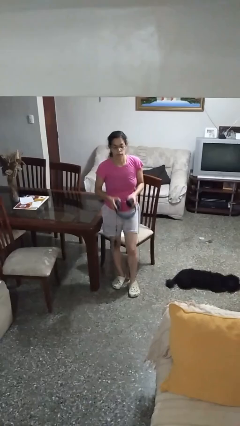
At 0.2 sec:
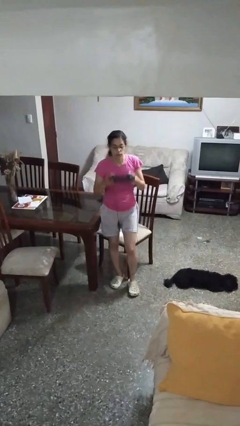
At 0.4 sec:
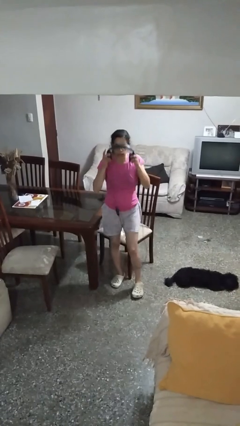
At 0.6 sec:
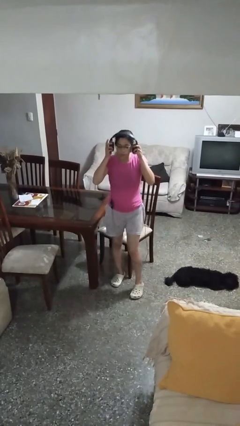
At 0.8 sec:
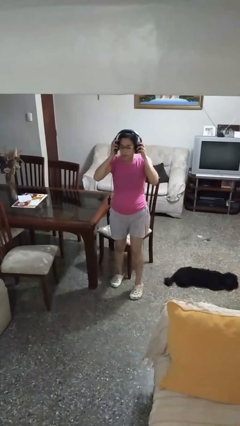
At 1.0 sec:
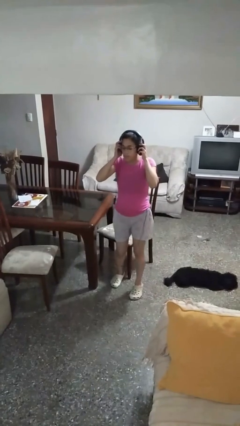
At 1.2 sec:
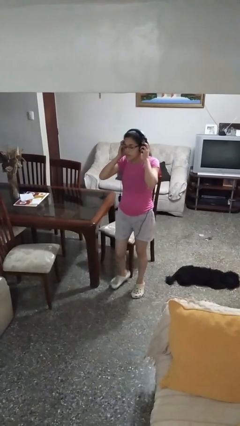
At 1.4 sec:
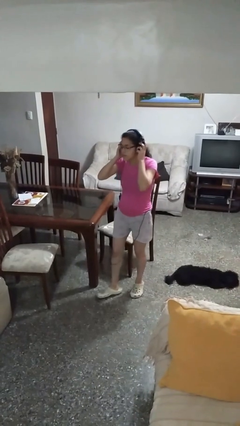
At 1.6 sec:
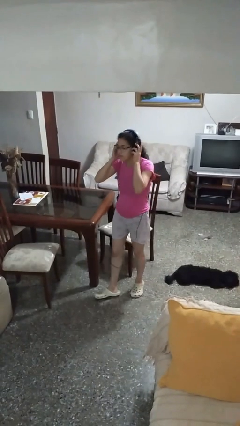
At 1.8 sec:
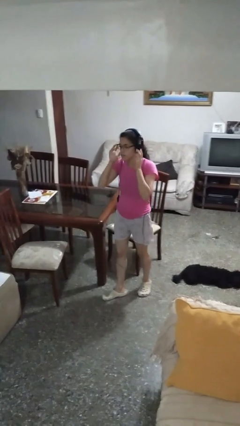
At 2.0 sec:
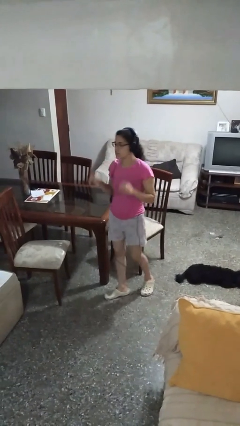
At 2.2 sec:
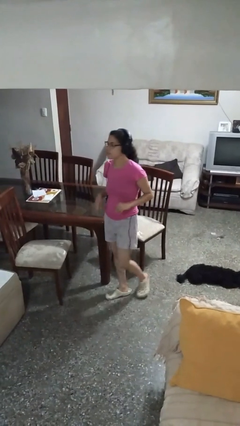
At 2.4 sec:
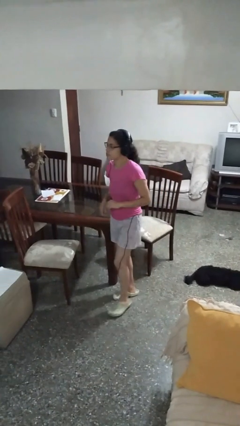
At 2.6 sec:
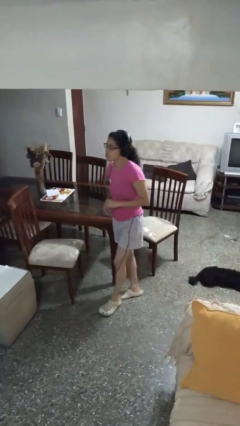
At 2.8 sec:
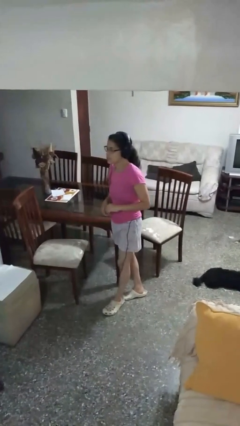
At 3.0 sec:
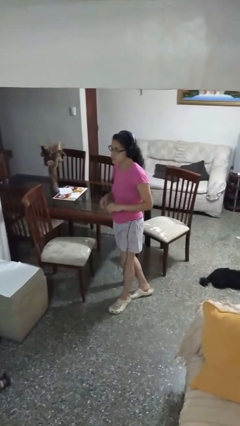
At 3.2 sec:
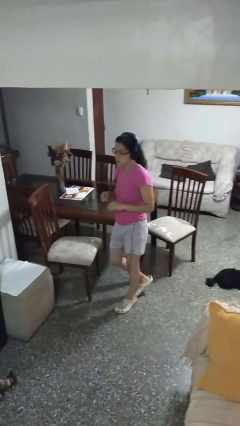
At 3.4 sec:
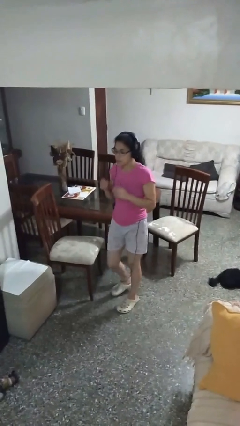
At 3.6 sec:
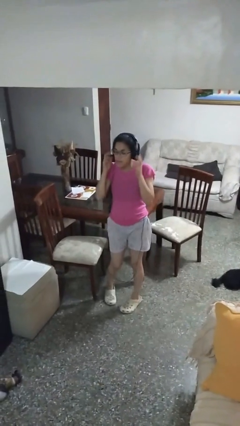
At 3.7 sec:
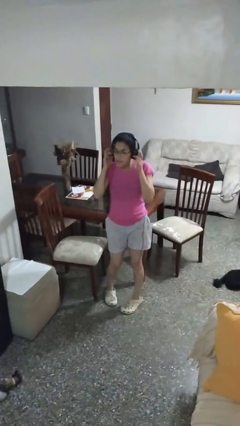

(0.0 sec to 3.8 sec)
person puts on headphones

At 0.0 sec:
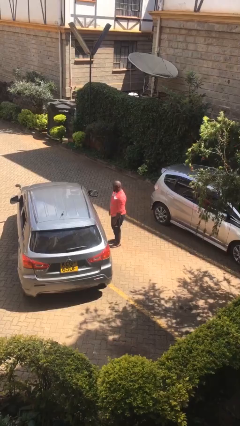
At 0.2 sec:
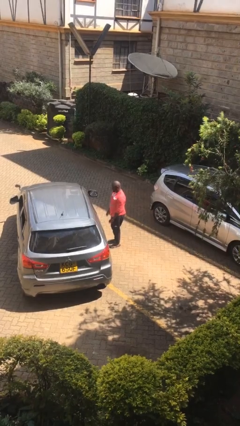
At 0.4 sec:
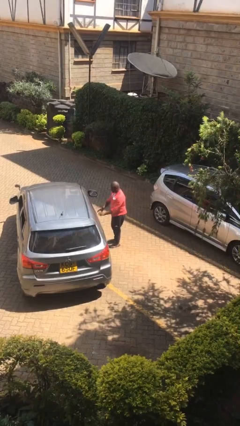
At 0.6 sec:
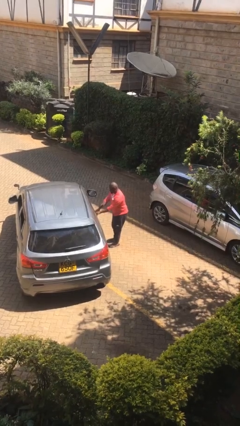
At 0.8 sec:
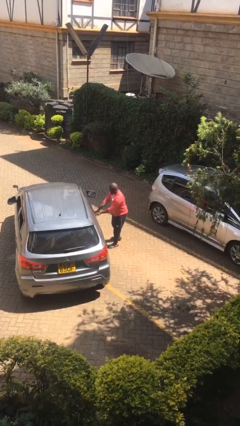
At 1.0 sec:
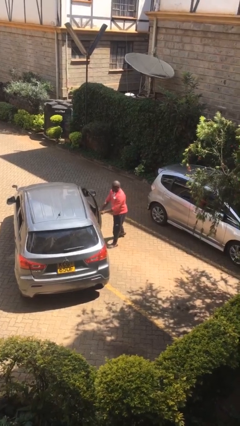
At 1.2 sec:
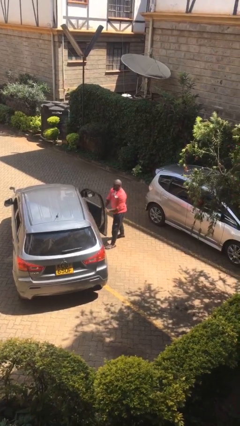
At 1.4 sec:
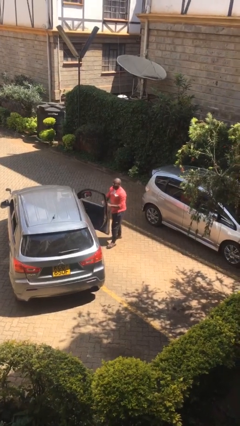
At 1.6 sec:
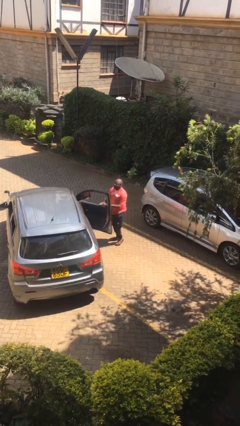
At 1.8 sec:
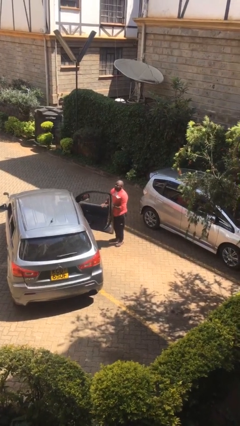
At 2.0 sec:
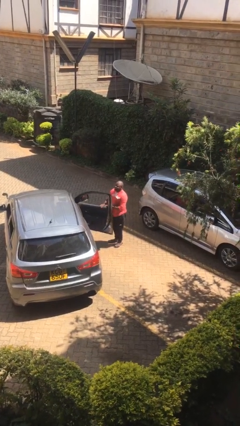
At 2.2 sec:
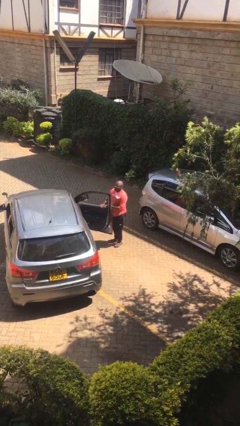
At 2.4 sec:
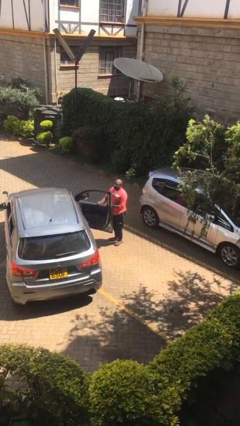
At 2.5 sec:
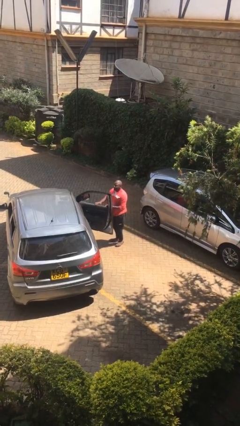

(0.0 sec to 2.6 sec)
person opens car door

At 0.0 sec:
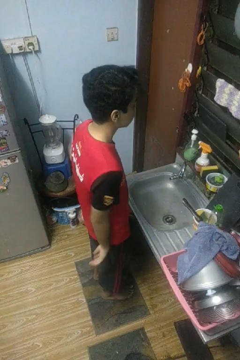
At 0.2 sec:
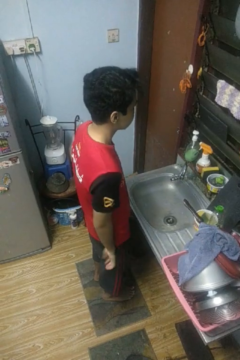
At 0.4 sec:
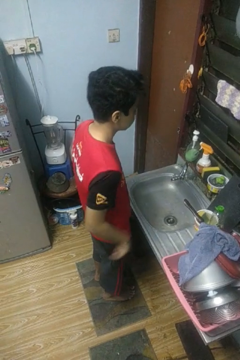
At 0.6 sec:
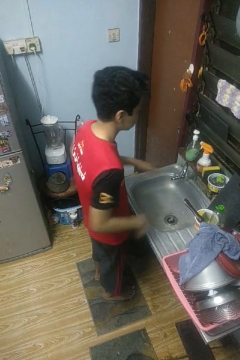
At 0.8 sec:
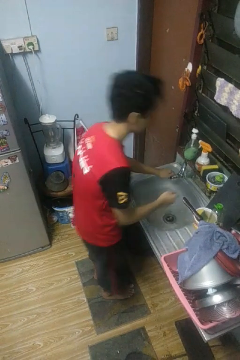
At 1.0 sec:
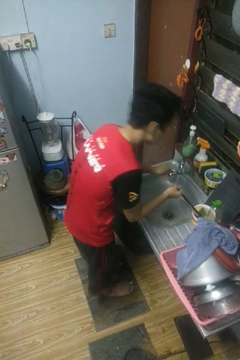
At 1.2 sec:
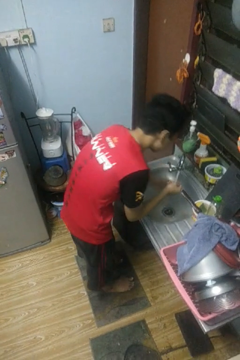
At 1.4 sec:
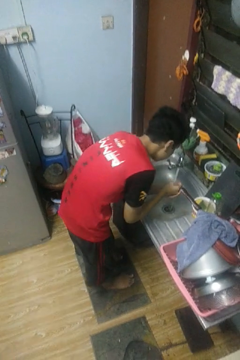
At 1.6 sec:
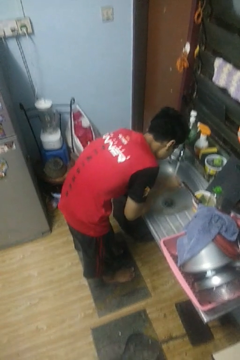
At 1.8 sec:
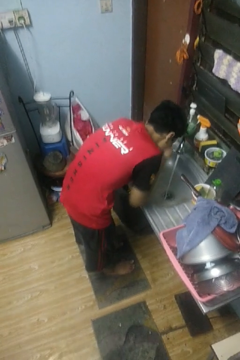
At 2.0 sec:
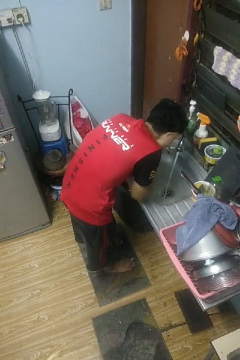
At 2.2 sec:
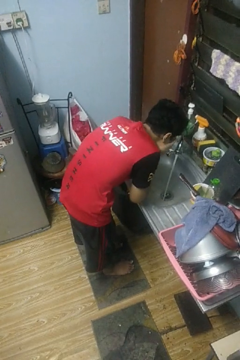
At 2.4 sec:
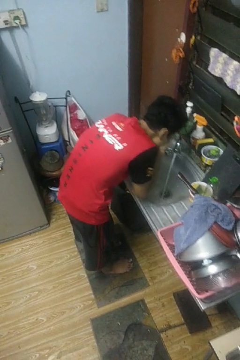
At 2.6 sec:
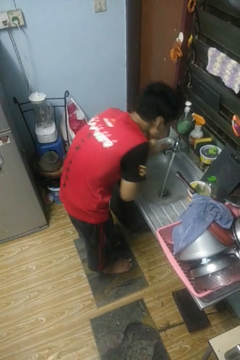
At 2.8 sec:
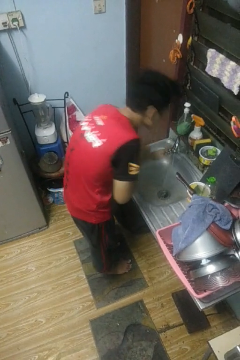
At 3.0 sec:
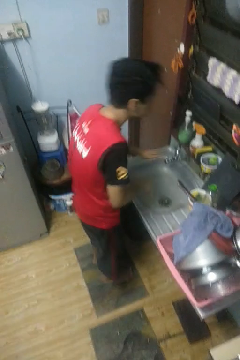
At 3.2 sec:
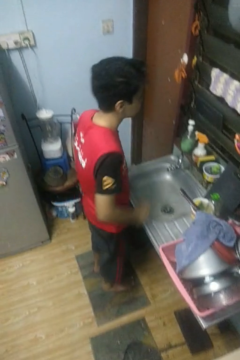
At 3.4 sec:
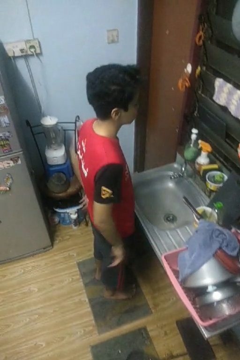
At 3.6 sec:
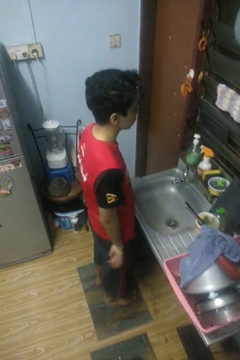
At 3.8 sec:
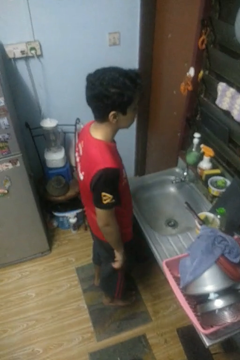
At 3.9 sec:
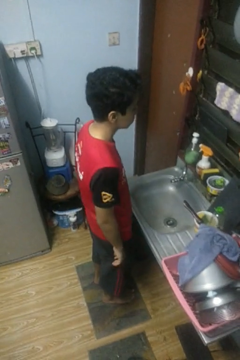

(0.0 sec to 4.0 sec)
person washes face

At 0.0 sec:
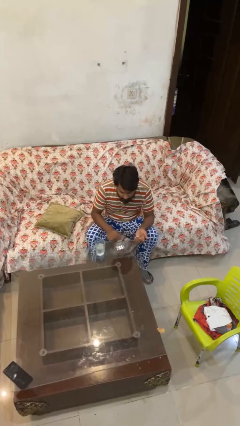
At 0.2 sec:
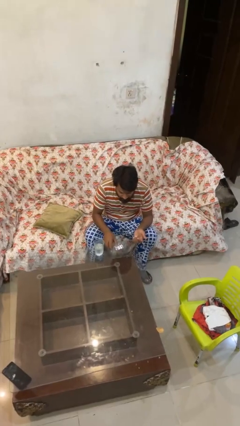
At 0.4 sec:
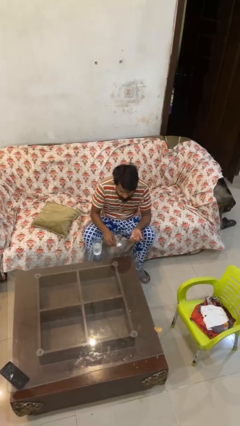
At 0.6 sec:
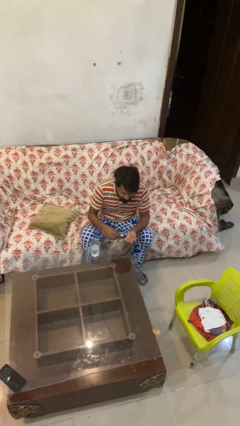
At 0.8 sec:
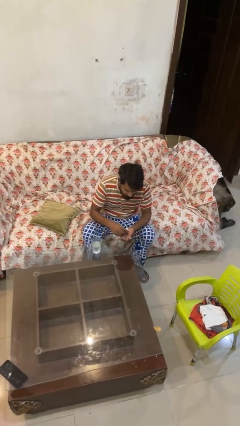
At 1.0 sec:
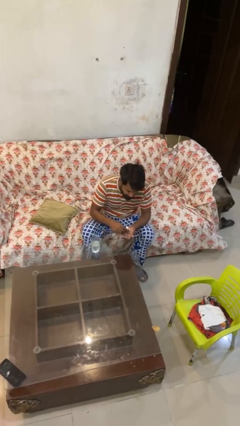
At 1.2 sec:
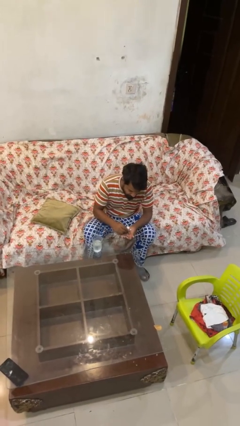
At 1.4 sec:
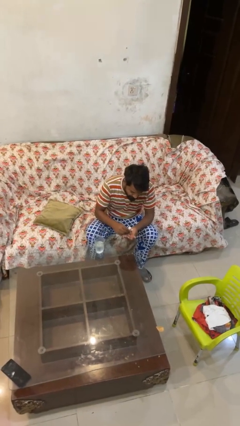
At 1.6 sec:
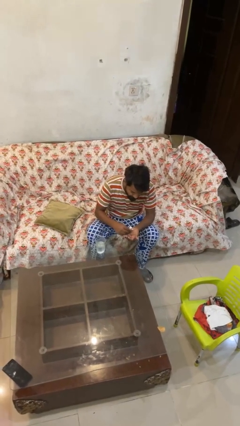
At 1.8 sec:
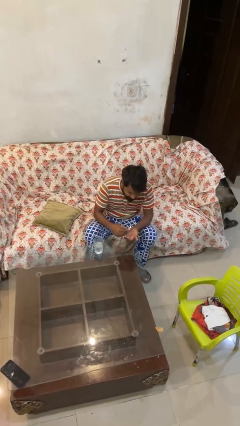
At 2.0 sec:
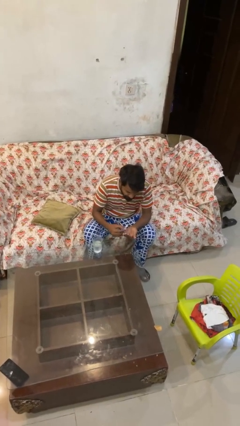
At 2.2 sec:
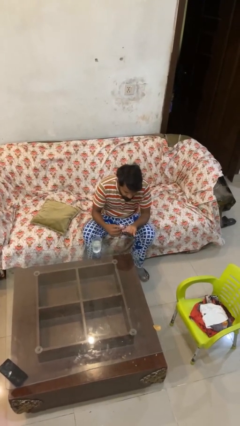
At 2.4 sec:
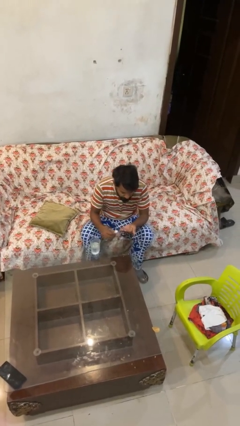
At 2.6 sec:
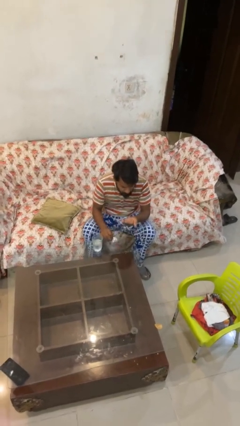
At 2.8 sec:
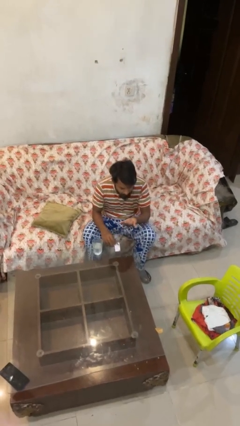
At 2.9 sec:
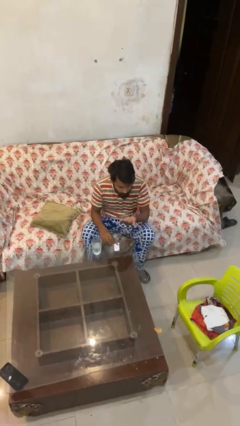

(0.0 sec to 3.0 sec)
person takes medicine pills

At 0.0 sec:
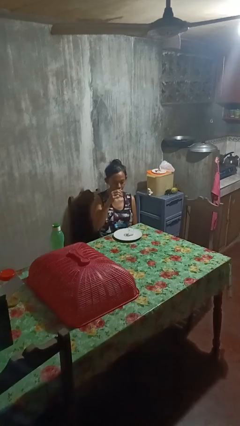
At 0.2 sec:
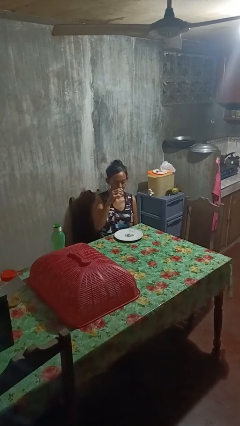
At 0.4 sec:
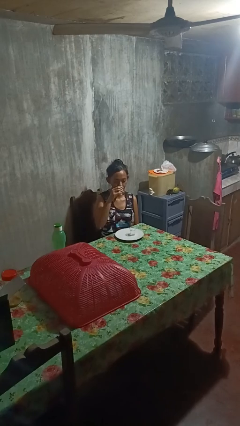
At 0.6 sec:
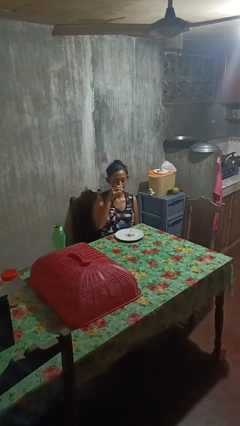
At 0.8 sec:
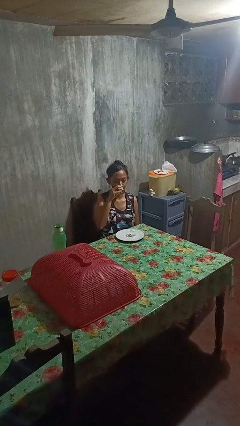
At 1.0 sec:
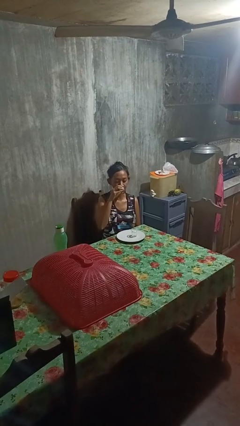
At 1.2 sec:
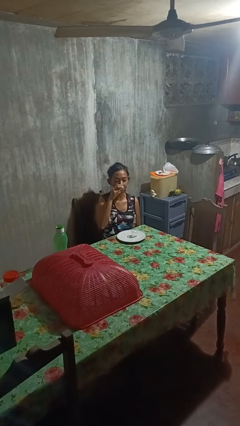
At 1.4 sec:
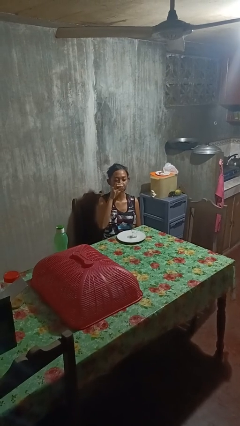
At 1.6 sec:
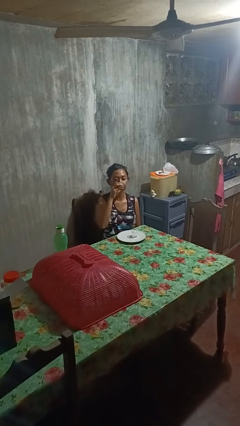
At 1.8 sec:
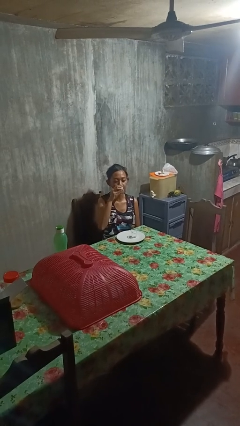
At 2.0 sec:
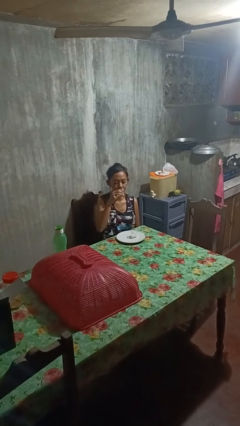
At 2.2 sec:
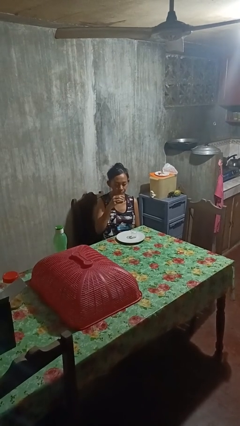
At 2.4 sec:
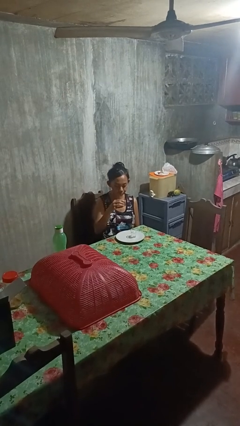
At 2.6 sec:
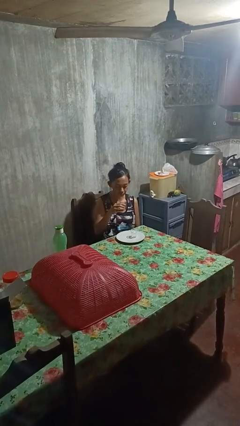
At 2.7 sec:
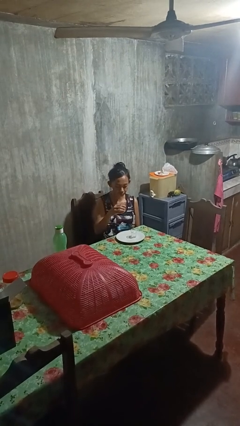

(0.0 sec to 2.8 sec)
person drinks from shotglass

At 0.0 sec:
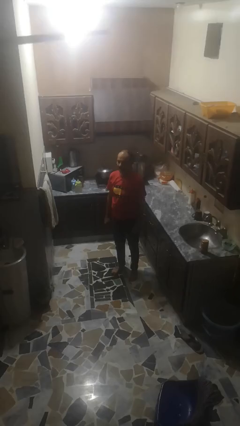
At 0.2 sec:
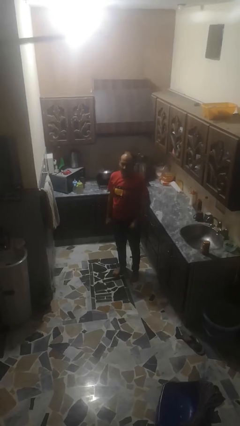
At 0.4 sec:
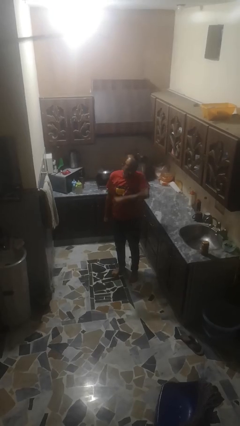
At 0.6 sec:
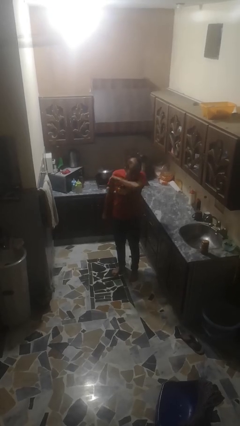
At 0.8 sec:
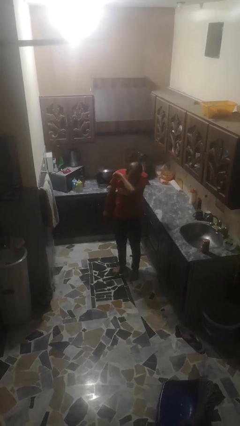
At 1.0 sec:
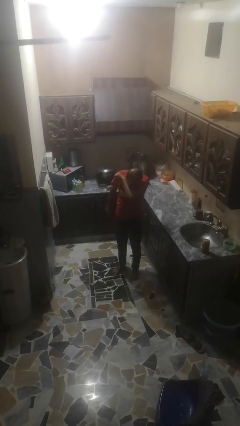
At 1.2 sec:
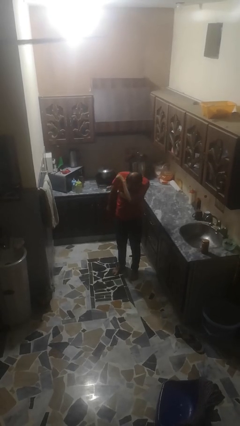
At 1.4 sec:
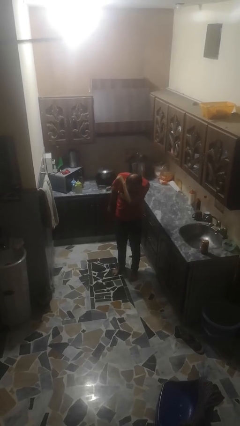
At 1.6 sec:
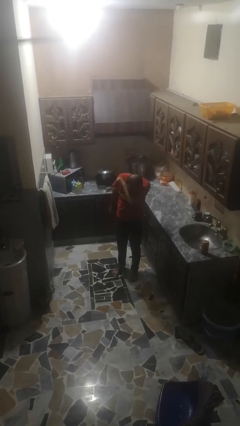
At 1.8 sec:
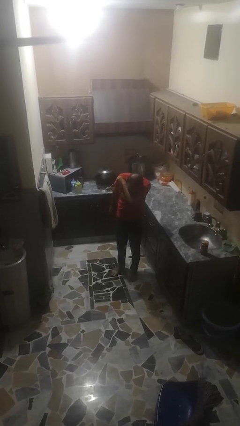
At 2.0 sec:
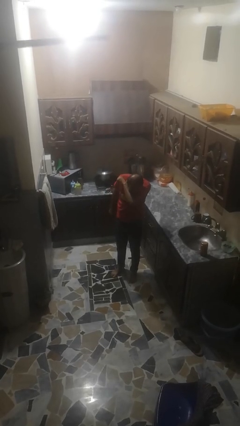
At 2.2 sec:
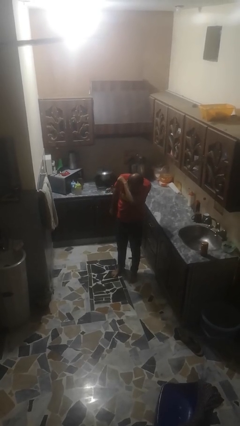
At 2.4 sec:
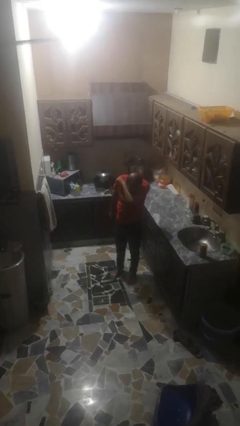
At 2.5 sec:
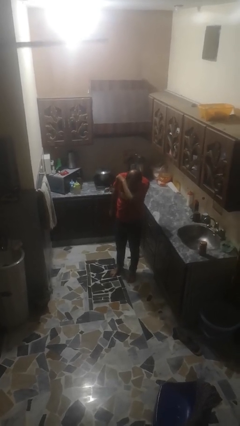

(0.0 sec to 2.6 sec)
person sneezes into arm
